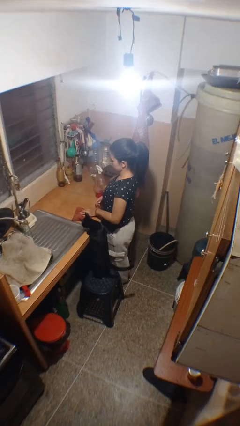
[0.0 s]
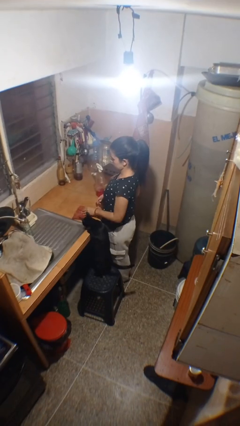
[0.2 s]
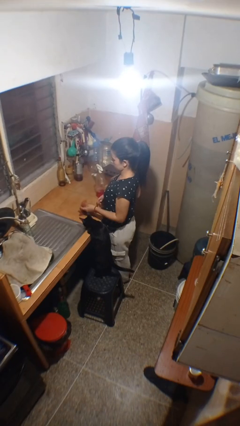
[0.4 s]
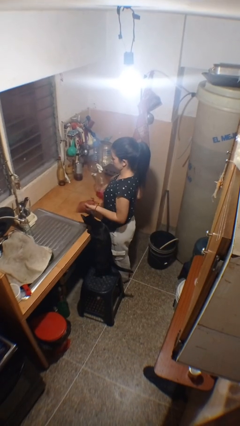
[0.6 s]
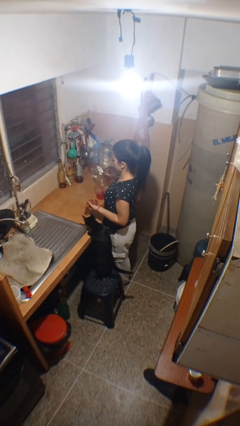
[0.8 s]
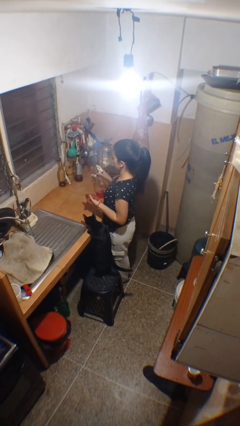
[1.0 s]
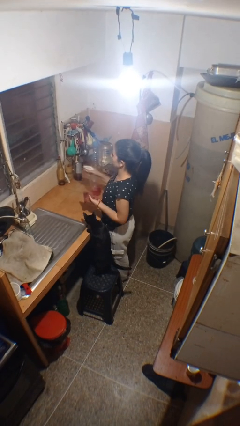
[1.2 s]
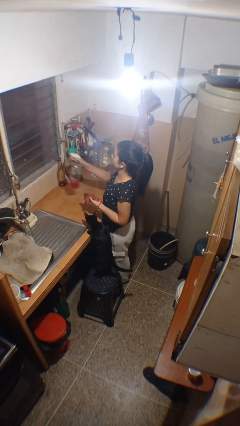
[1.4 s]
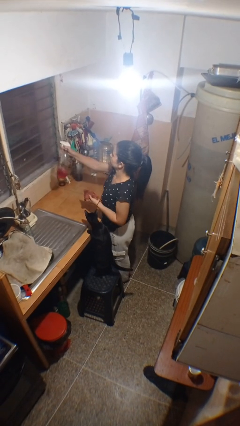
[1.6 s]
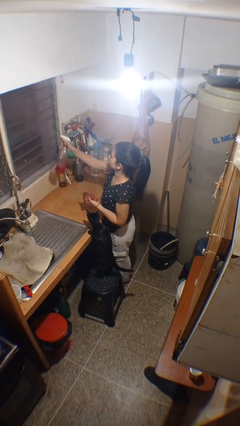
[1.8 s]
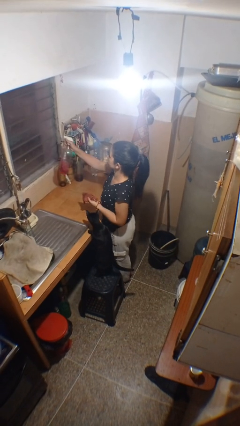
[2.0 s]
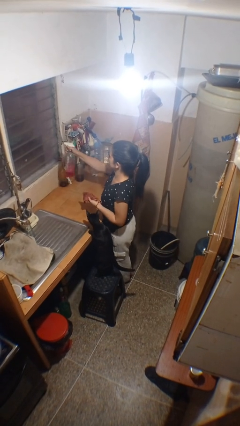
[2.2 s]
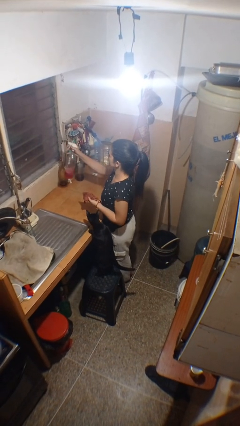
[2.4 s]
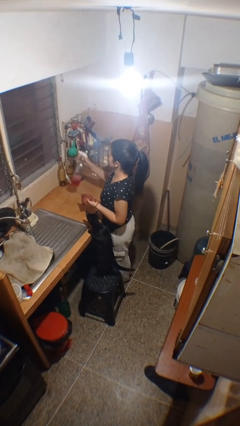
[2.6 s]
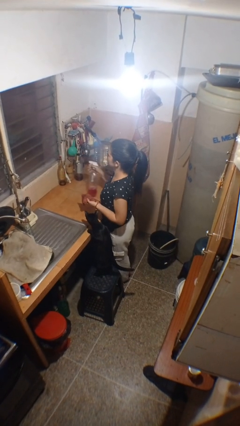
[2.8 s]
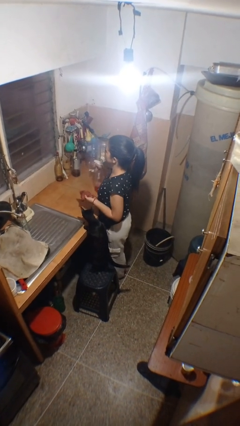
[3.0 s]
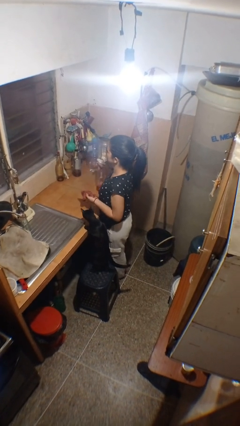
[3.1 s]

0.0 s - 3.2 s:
person sprays from bottle

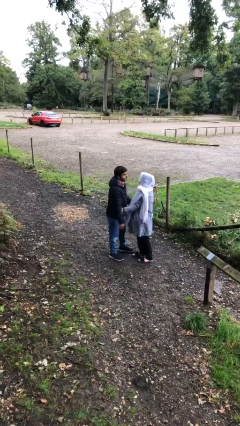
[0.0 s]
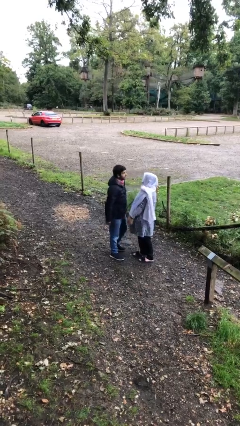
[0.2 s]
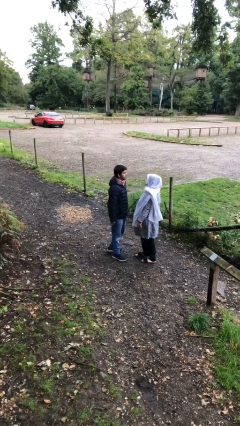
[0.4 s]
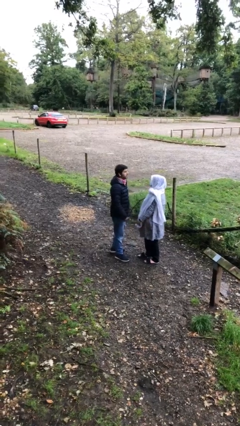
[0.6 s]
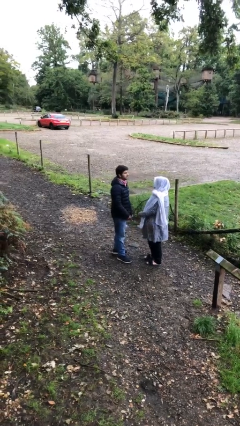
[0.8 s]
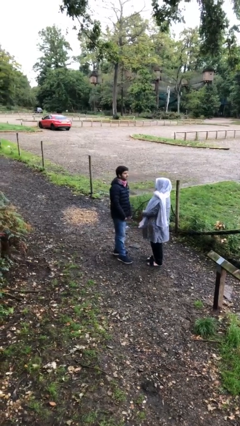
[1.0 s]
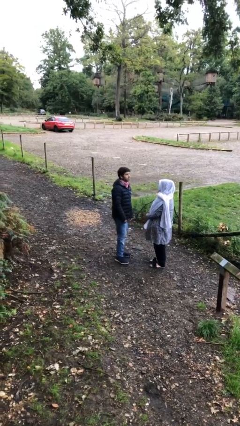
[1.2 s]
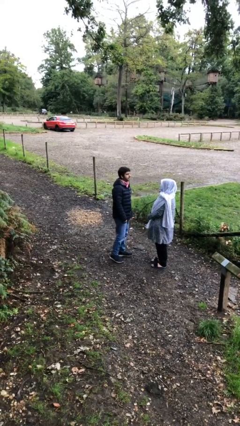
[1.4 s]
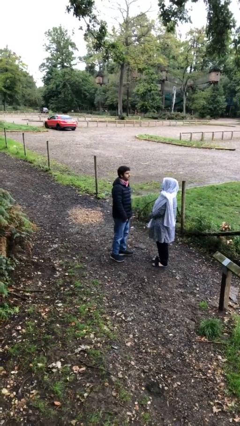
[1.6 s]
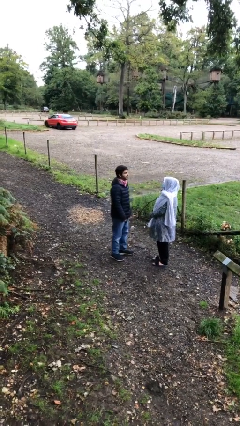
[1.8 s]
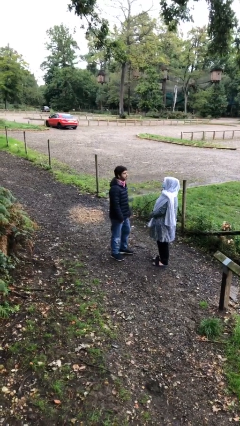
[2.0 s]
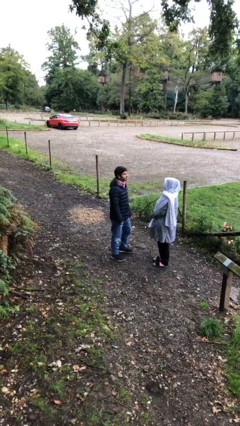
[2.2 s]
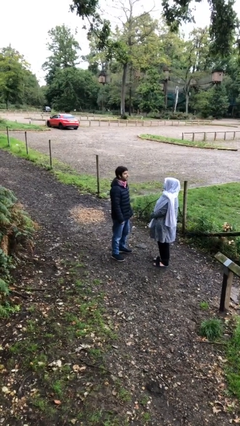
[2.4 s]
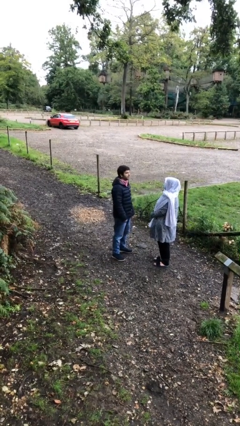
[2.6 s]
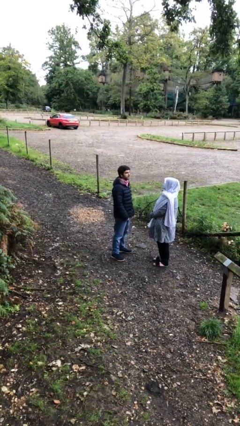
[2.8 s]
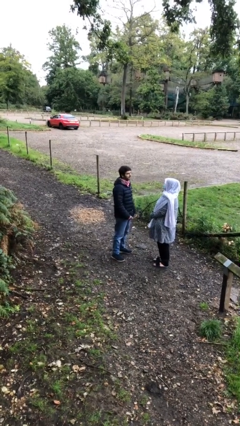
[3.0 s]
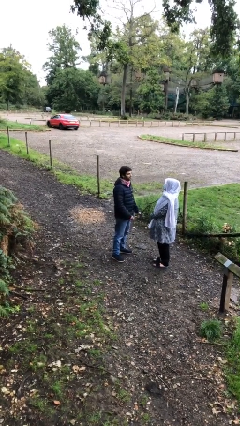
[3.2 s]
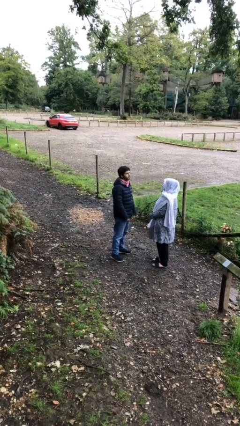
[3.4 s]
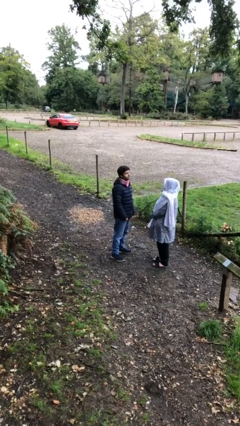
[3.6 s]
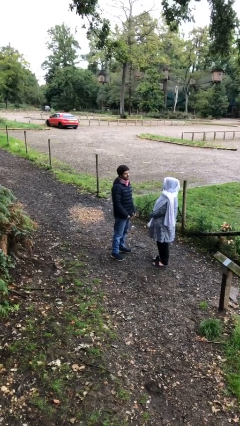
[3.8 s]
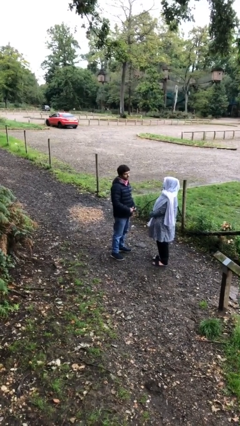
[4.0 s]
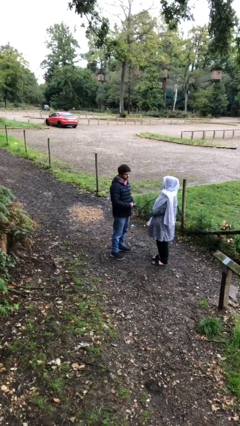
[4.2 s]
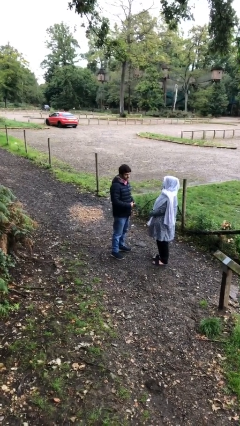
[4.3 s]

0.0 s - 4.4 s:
person talks to person

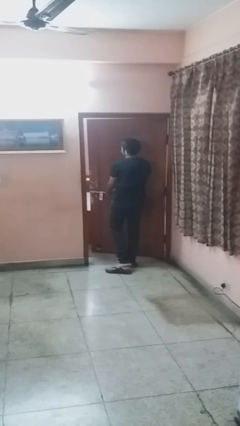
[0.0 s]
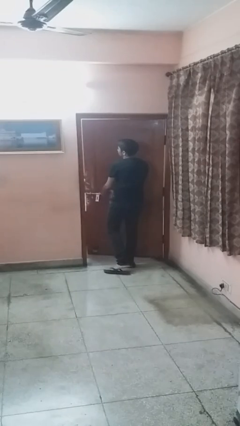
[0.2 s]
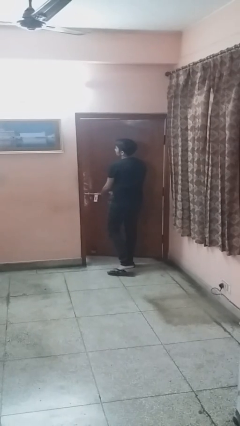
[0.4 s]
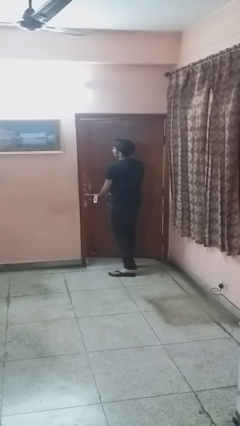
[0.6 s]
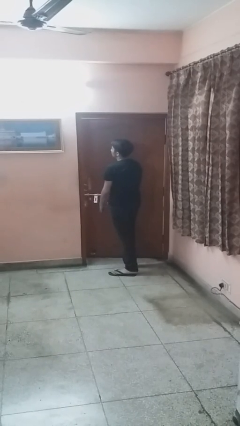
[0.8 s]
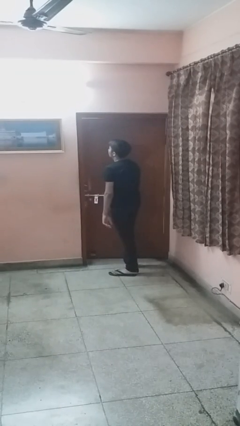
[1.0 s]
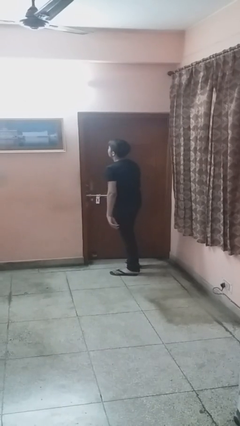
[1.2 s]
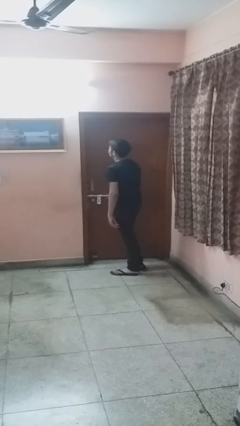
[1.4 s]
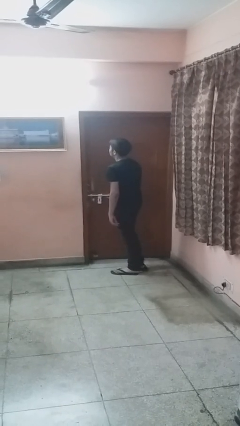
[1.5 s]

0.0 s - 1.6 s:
person closes facility door

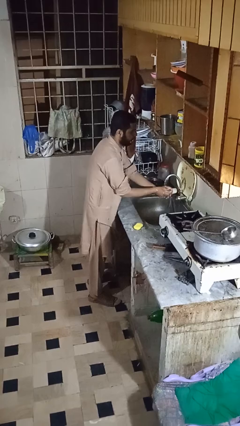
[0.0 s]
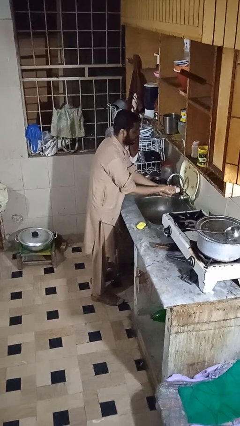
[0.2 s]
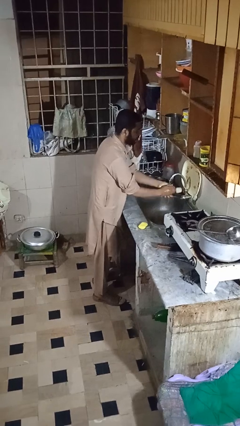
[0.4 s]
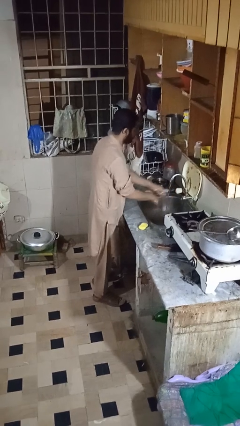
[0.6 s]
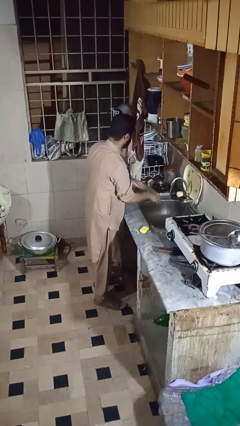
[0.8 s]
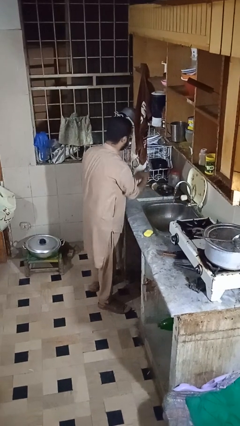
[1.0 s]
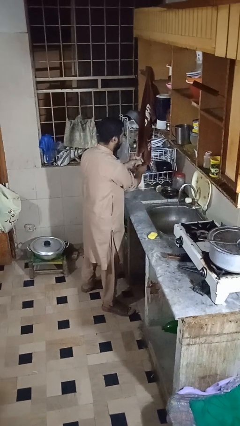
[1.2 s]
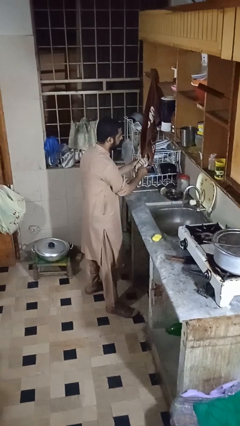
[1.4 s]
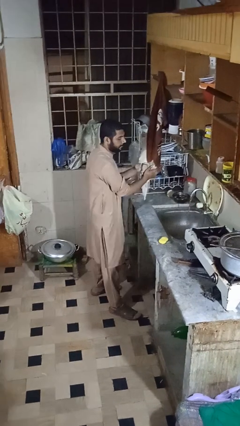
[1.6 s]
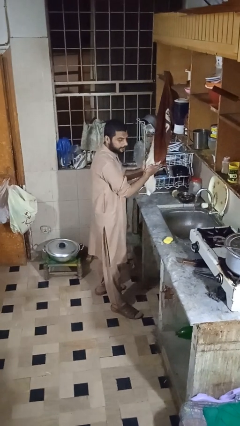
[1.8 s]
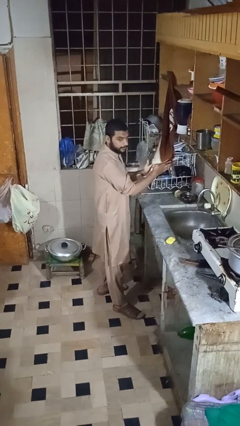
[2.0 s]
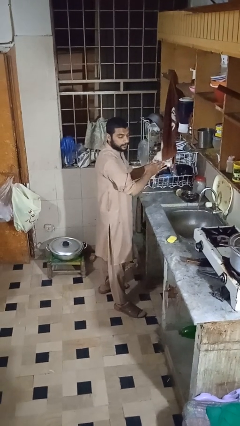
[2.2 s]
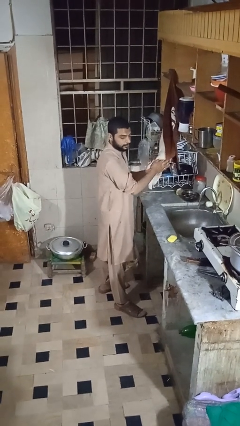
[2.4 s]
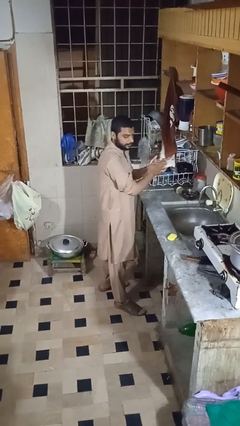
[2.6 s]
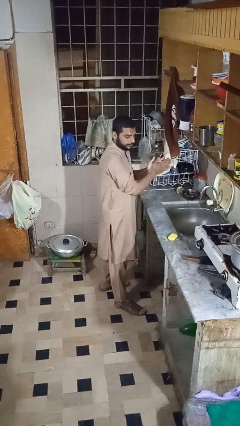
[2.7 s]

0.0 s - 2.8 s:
person dries hands with towel

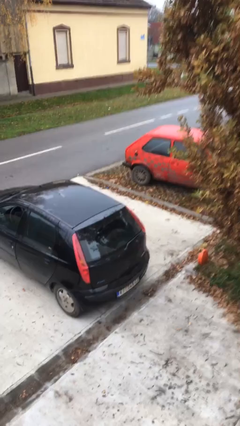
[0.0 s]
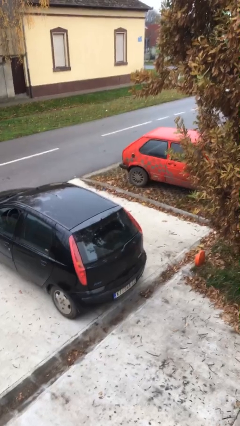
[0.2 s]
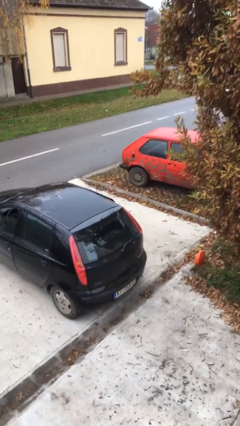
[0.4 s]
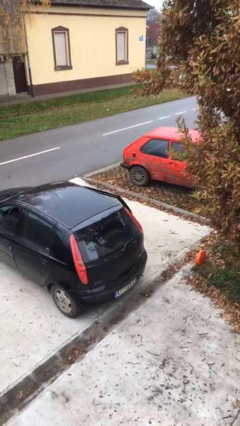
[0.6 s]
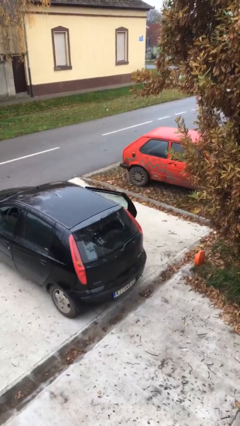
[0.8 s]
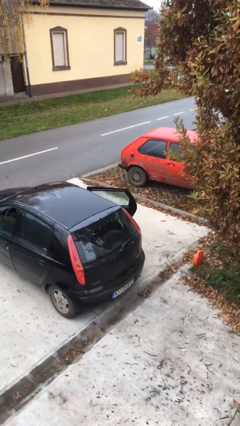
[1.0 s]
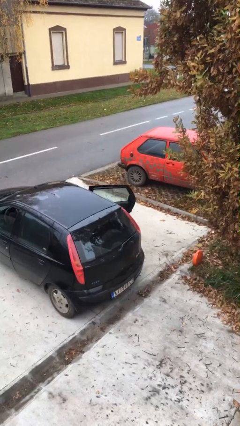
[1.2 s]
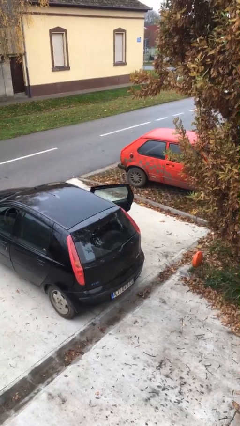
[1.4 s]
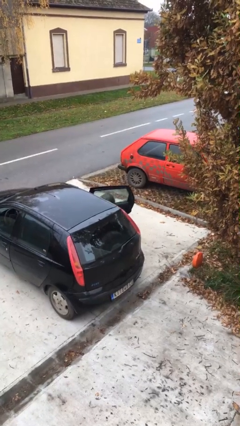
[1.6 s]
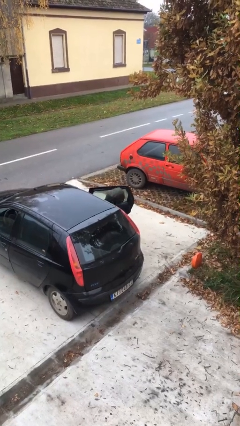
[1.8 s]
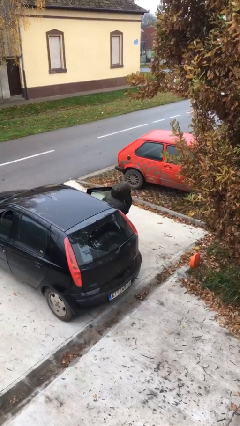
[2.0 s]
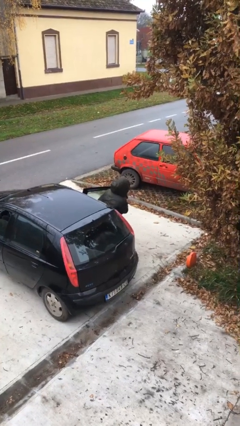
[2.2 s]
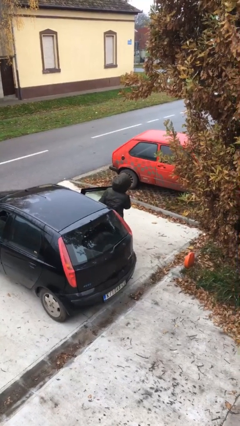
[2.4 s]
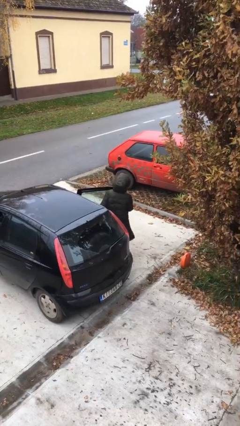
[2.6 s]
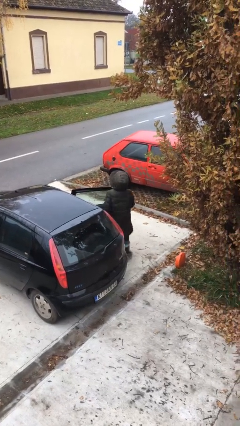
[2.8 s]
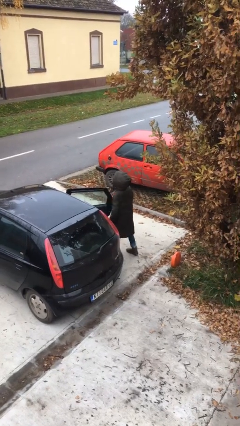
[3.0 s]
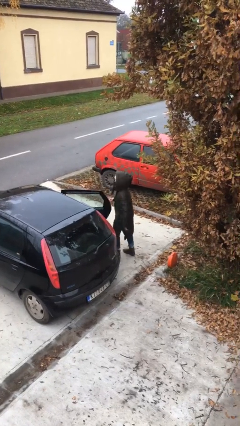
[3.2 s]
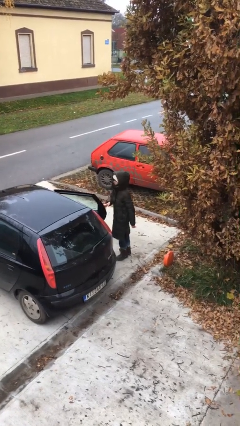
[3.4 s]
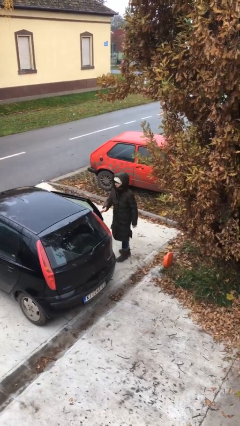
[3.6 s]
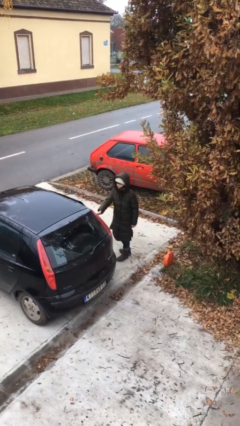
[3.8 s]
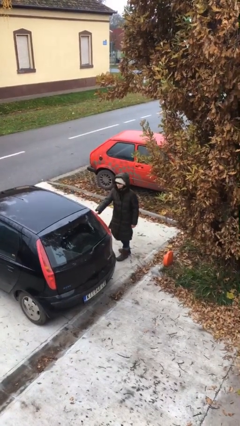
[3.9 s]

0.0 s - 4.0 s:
person exits car

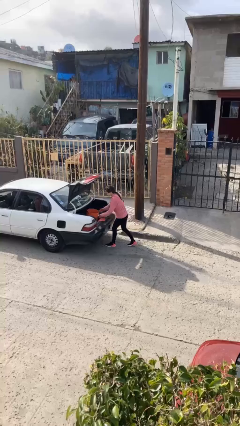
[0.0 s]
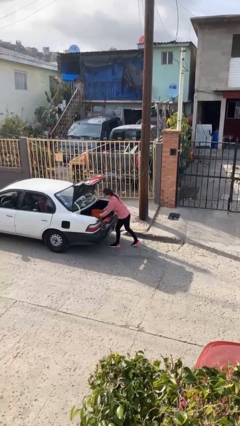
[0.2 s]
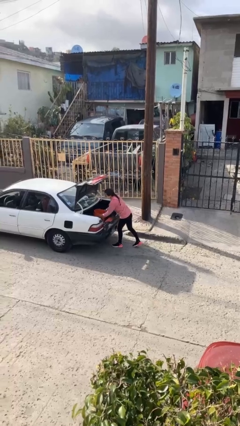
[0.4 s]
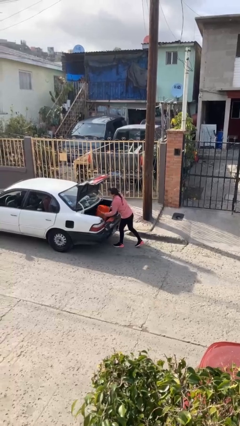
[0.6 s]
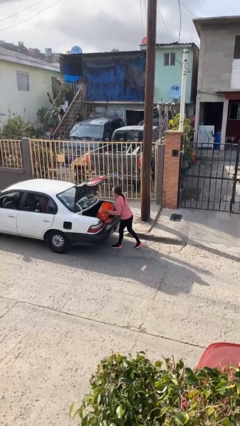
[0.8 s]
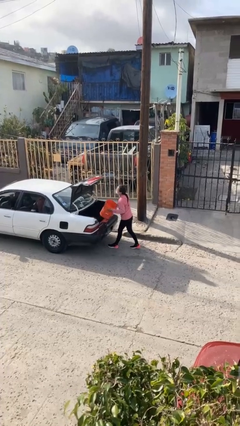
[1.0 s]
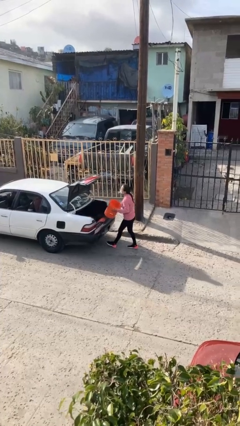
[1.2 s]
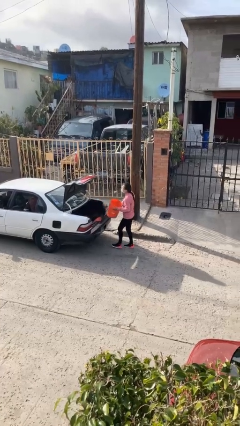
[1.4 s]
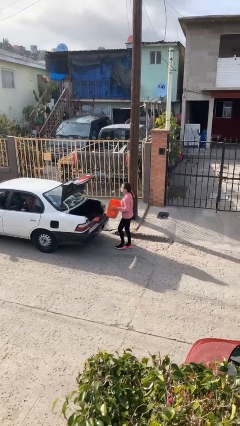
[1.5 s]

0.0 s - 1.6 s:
person unloads car
